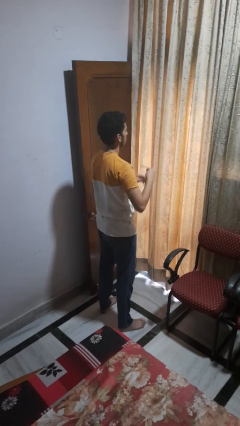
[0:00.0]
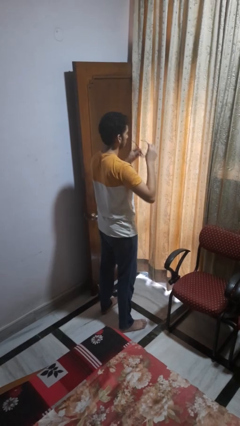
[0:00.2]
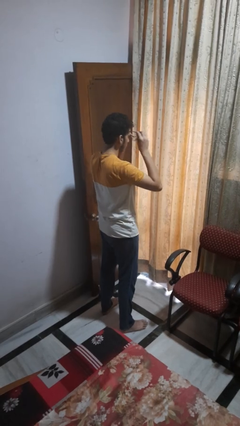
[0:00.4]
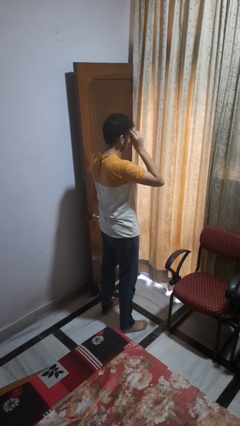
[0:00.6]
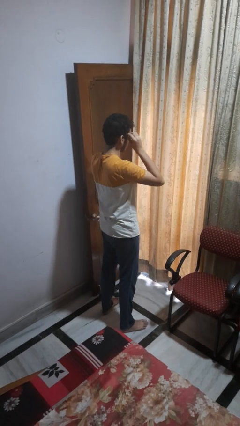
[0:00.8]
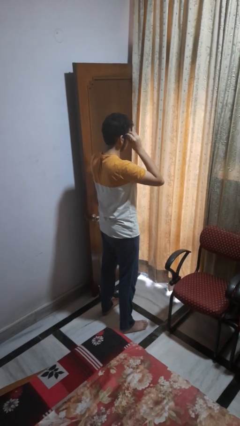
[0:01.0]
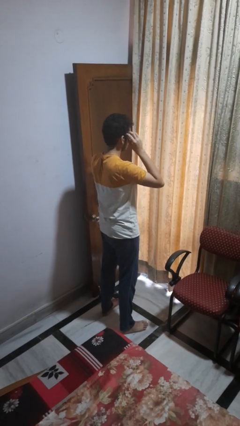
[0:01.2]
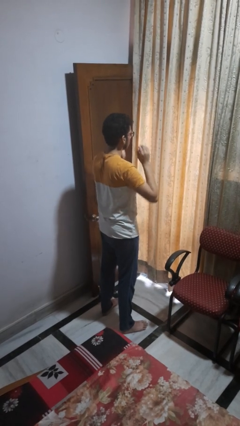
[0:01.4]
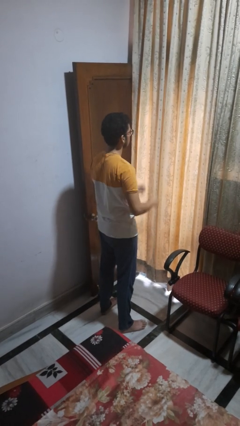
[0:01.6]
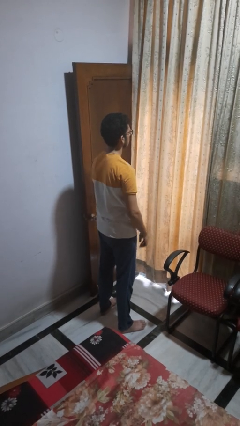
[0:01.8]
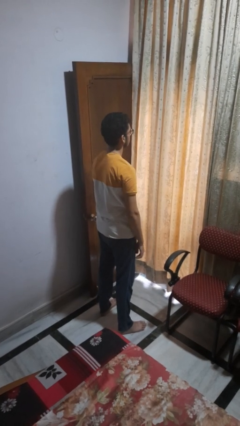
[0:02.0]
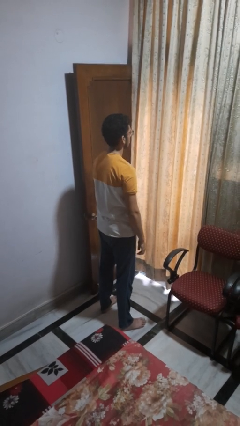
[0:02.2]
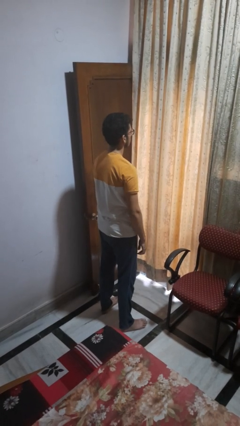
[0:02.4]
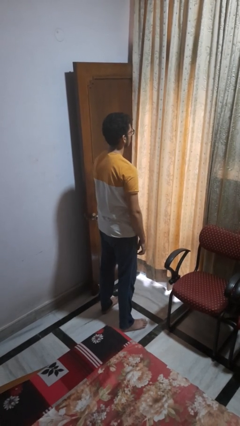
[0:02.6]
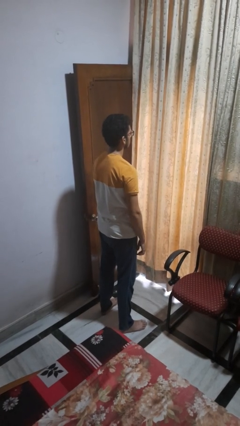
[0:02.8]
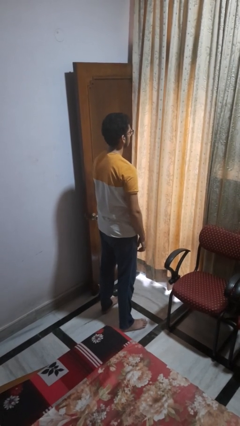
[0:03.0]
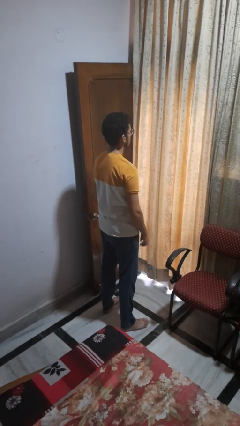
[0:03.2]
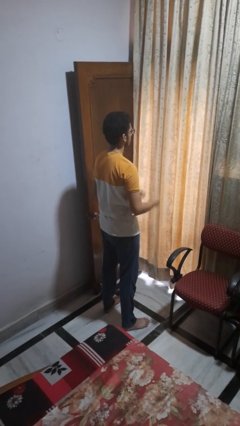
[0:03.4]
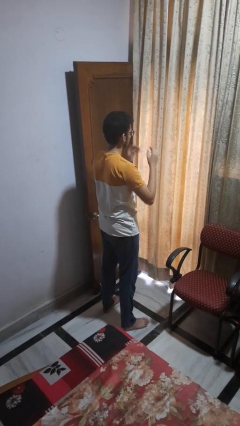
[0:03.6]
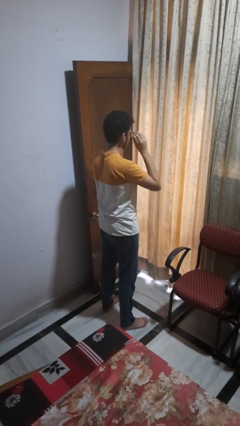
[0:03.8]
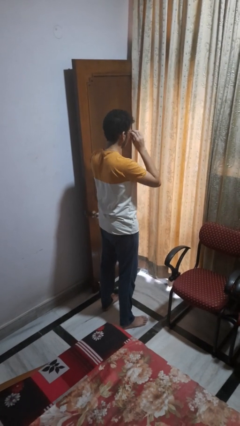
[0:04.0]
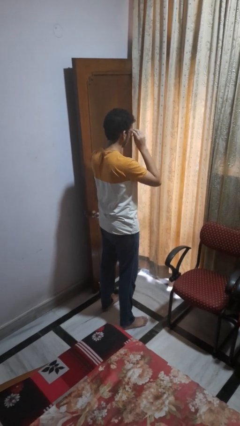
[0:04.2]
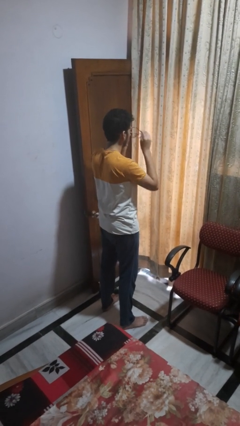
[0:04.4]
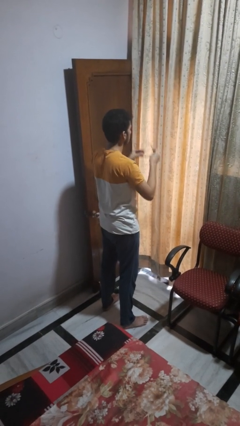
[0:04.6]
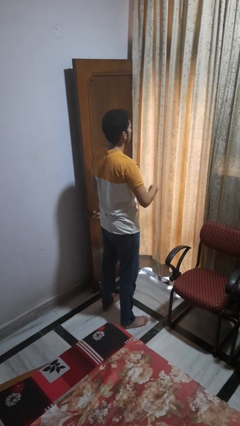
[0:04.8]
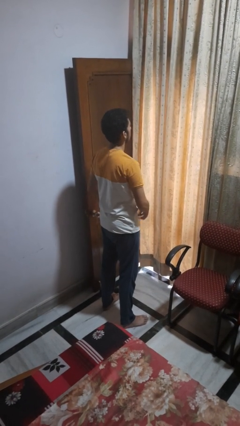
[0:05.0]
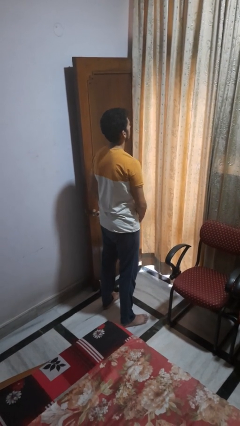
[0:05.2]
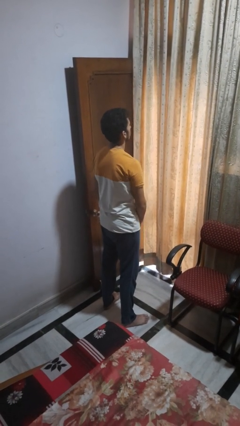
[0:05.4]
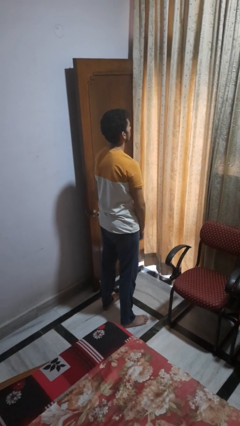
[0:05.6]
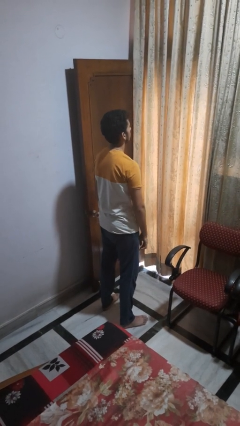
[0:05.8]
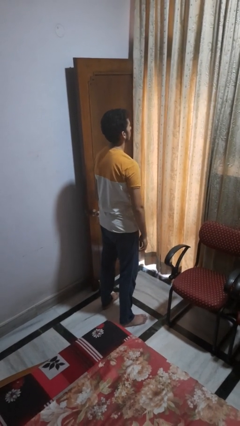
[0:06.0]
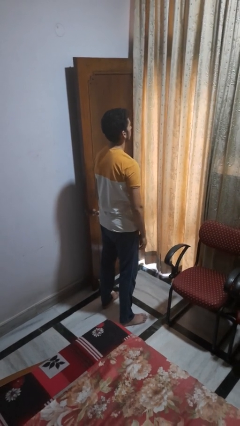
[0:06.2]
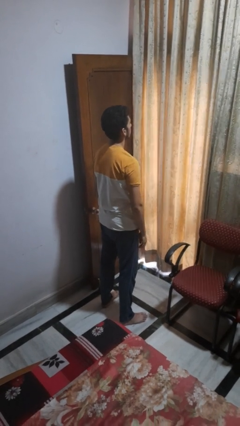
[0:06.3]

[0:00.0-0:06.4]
person puts on glasses

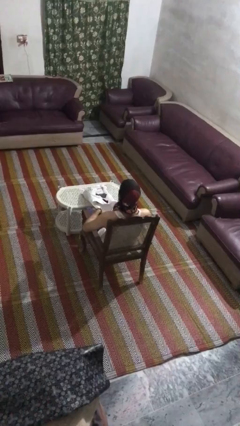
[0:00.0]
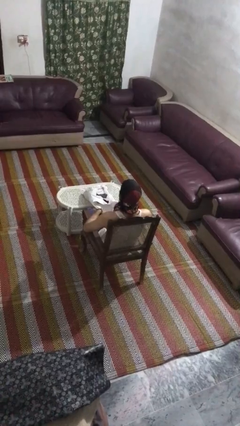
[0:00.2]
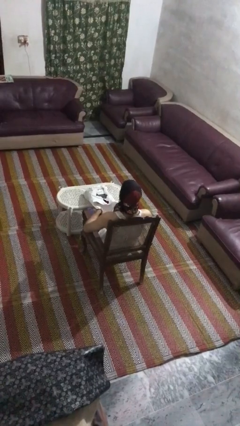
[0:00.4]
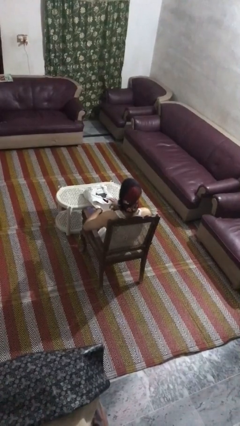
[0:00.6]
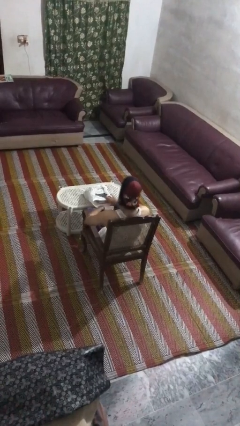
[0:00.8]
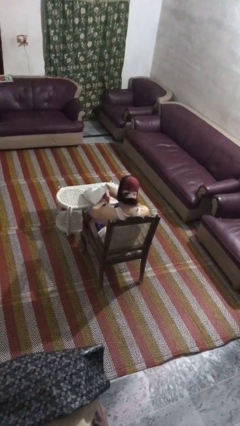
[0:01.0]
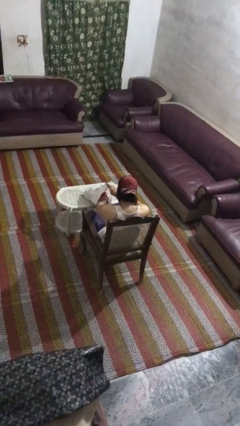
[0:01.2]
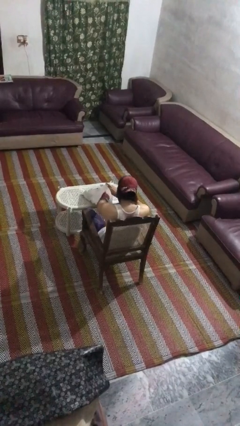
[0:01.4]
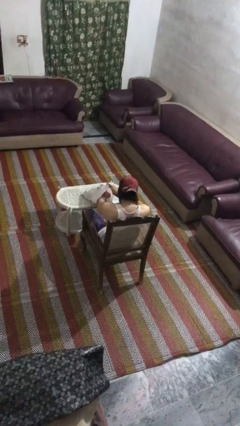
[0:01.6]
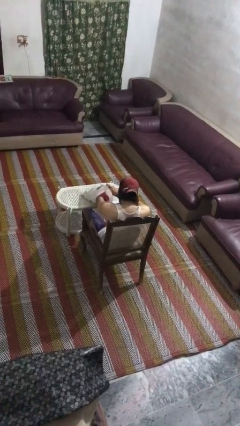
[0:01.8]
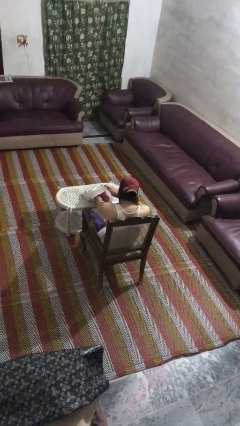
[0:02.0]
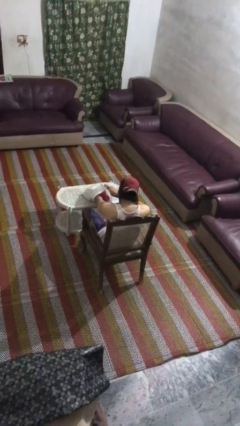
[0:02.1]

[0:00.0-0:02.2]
person searches in bag

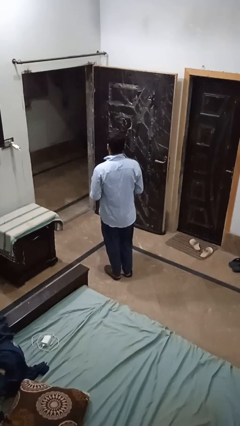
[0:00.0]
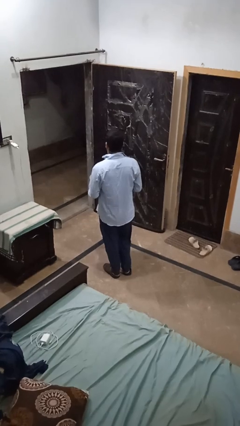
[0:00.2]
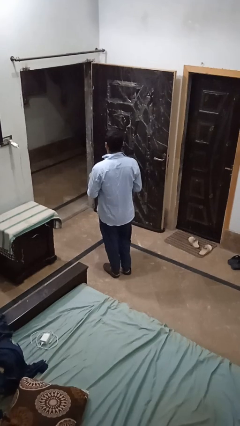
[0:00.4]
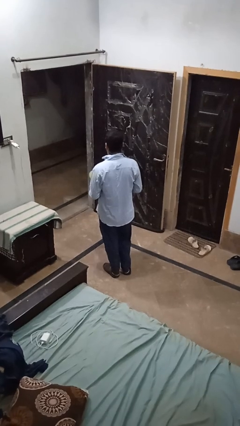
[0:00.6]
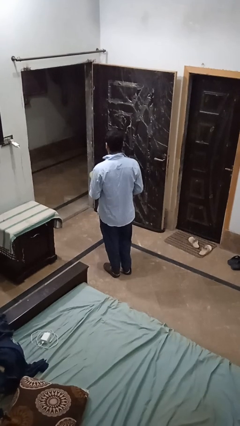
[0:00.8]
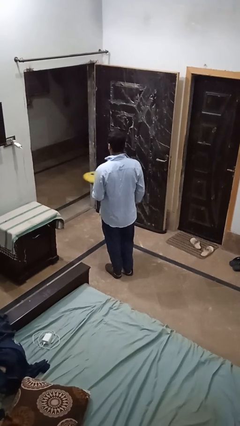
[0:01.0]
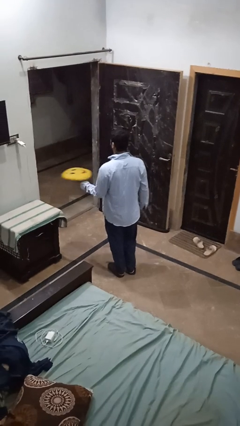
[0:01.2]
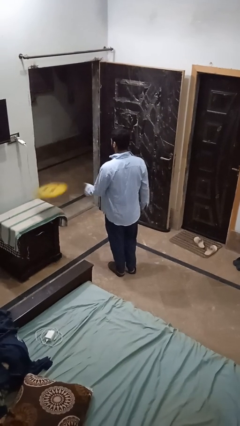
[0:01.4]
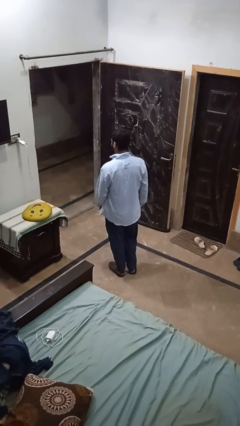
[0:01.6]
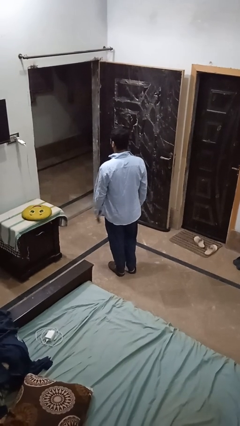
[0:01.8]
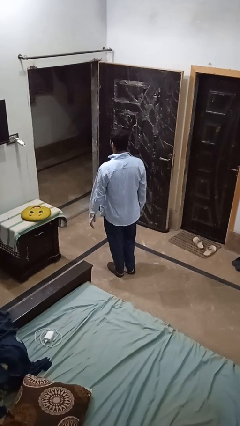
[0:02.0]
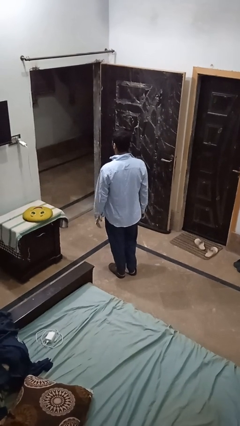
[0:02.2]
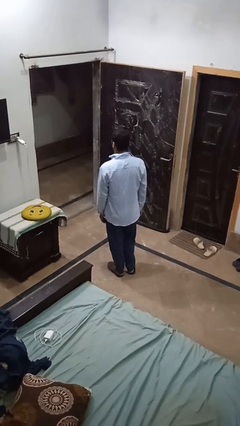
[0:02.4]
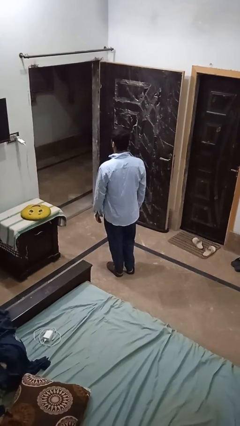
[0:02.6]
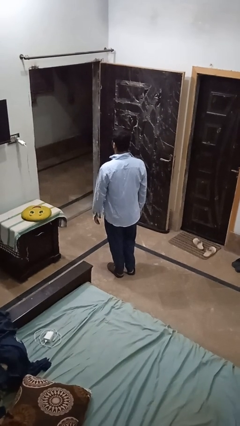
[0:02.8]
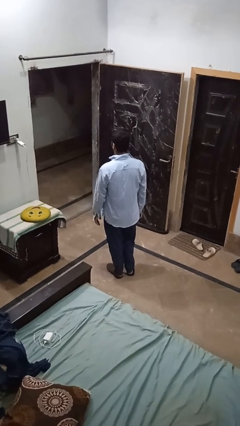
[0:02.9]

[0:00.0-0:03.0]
person throws object on table

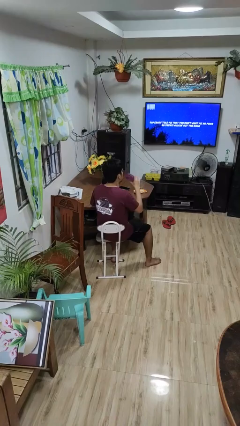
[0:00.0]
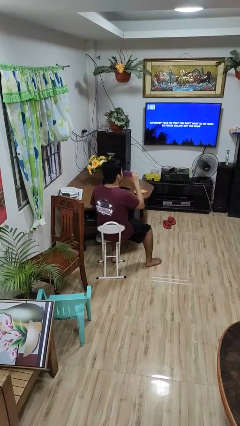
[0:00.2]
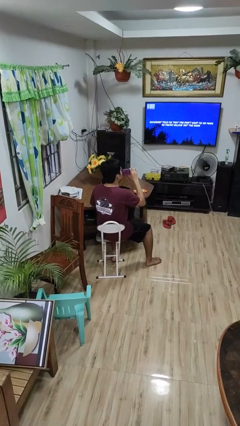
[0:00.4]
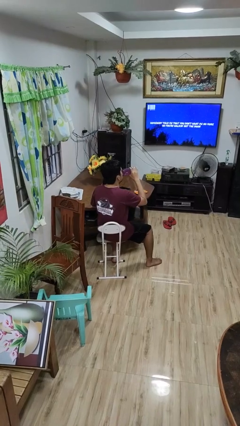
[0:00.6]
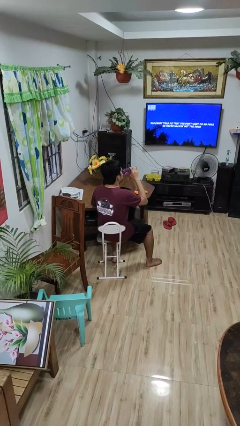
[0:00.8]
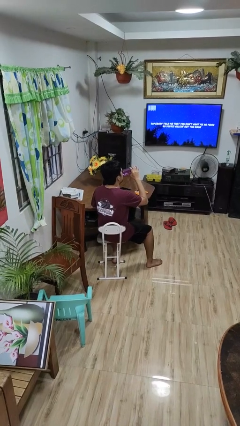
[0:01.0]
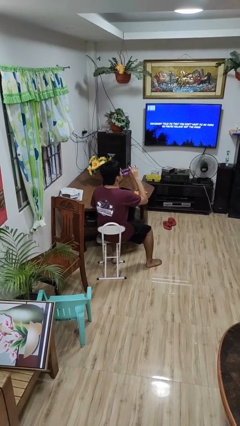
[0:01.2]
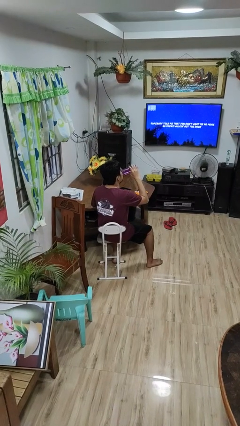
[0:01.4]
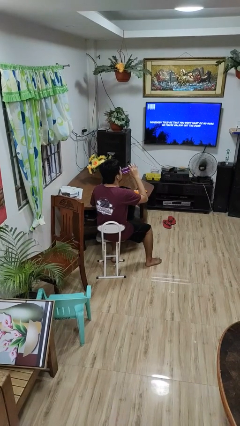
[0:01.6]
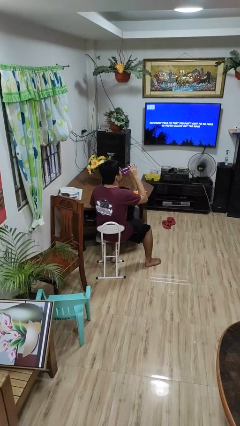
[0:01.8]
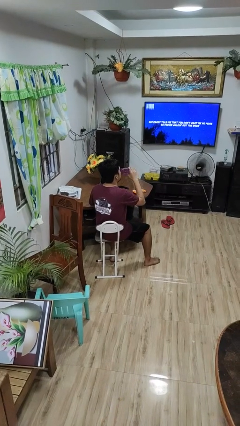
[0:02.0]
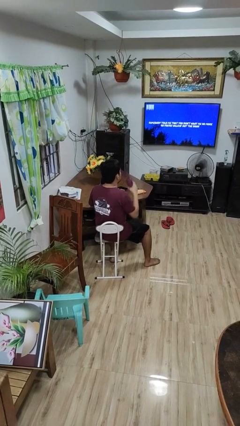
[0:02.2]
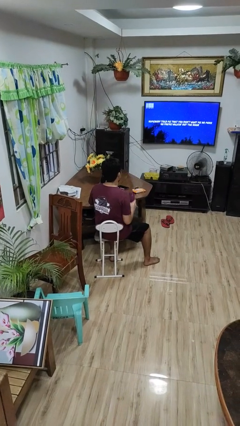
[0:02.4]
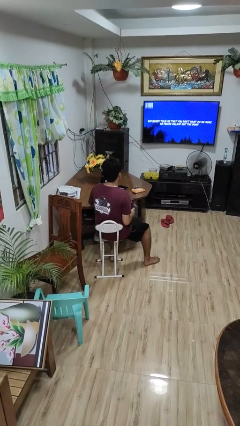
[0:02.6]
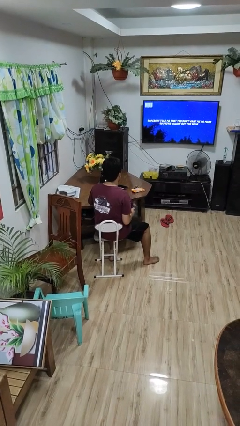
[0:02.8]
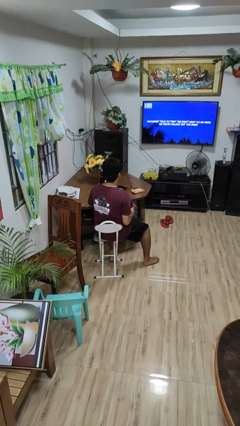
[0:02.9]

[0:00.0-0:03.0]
person drinks from bottle

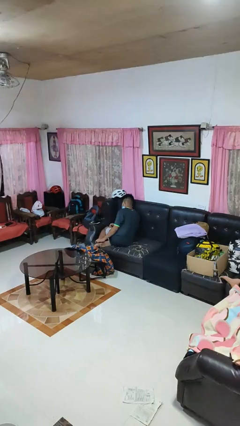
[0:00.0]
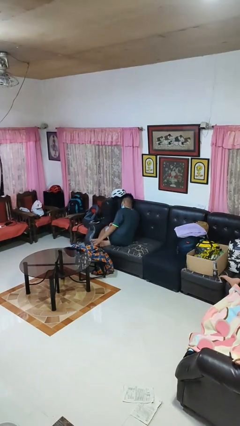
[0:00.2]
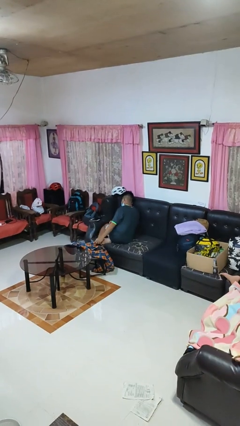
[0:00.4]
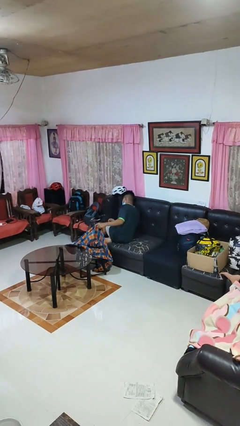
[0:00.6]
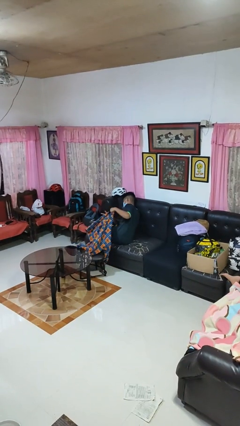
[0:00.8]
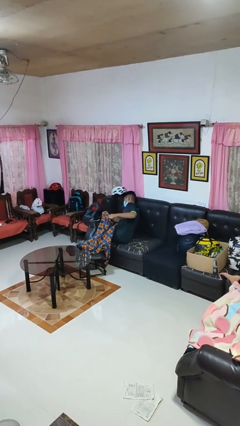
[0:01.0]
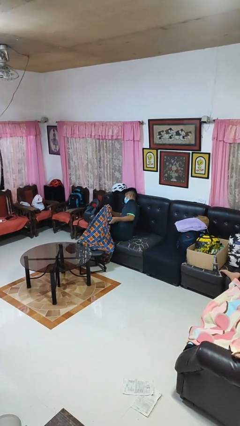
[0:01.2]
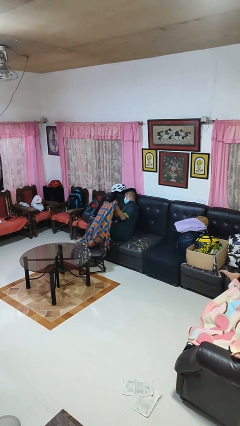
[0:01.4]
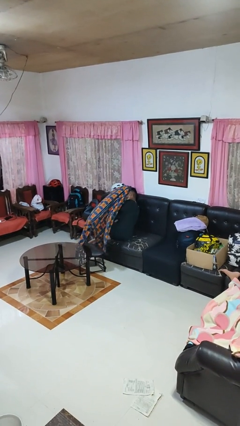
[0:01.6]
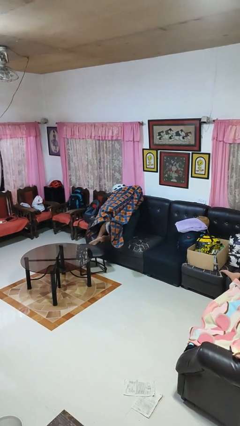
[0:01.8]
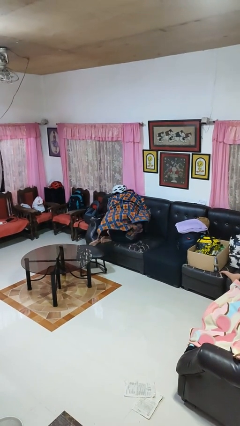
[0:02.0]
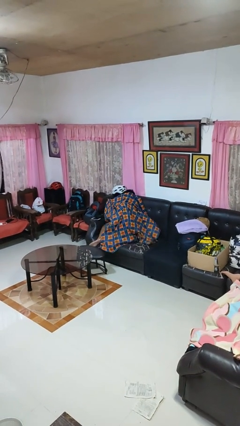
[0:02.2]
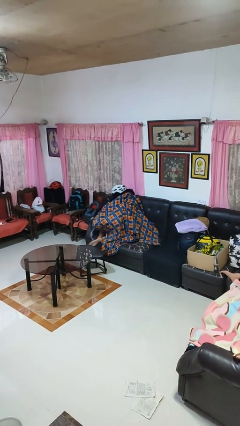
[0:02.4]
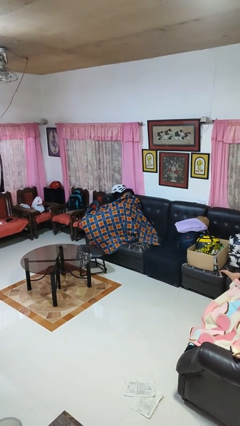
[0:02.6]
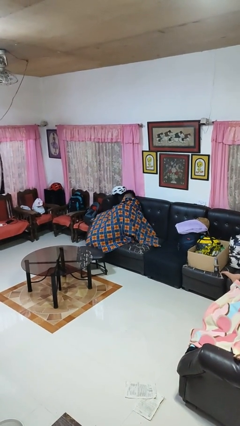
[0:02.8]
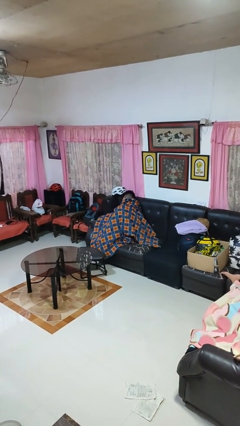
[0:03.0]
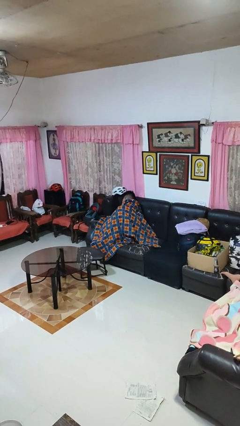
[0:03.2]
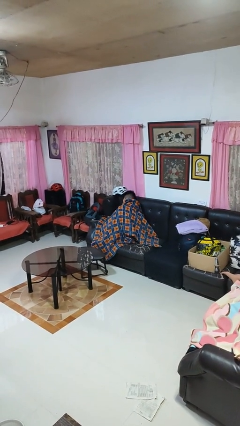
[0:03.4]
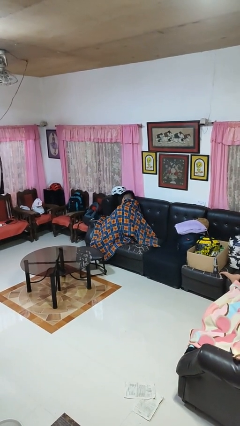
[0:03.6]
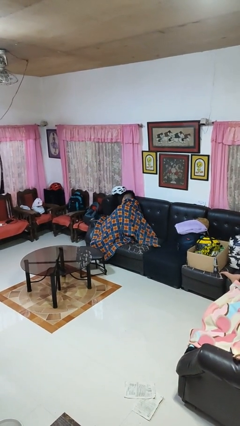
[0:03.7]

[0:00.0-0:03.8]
person covers with blanket
